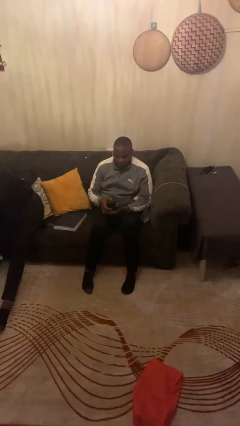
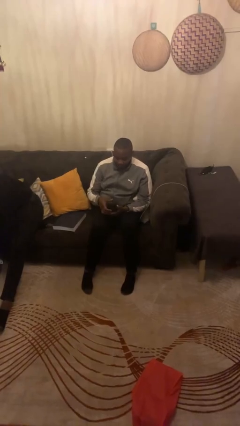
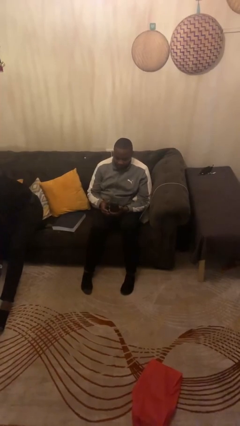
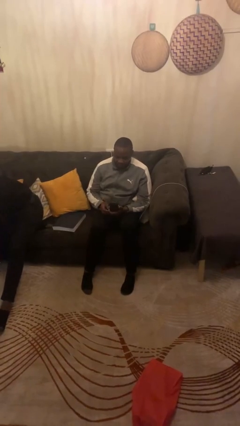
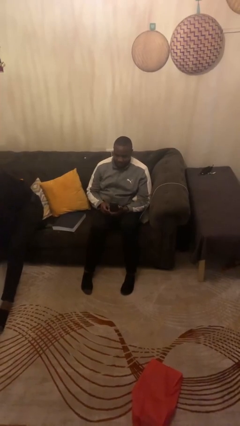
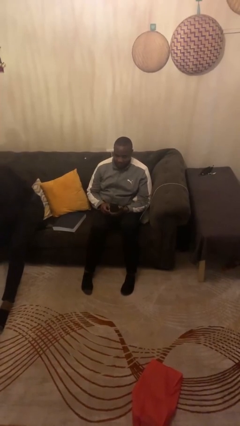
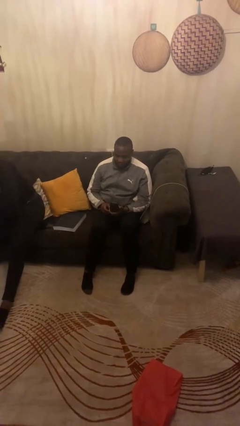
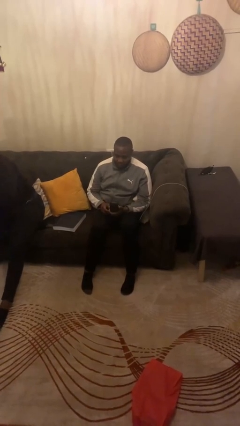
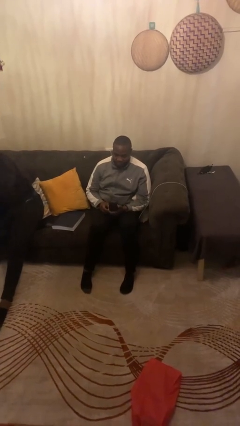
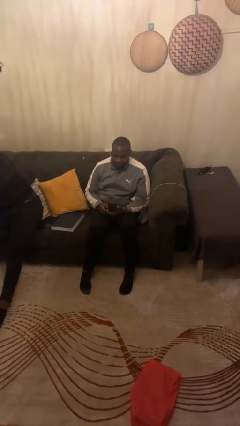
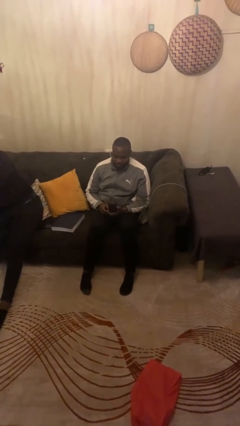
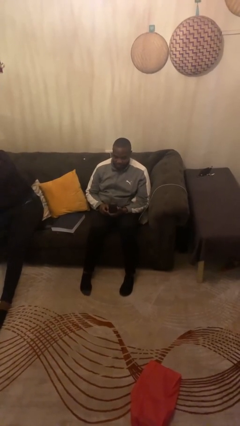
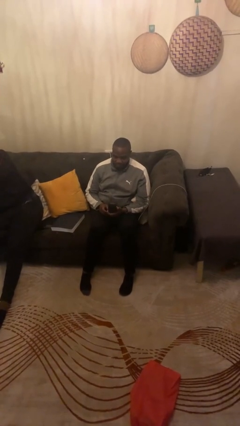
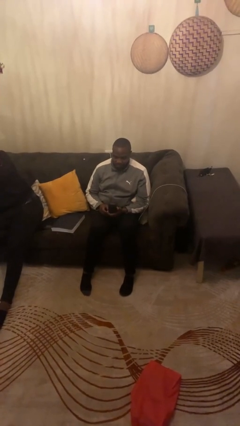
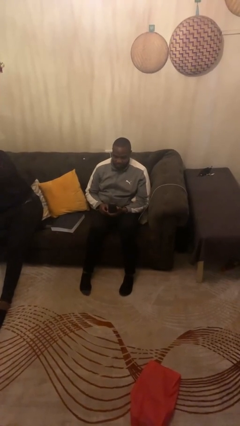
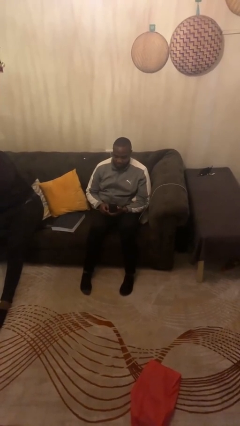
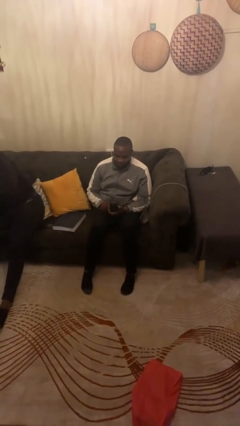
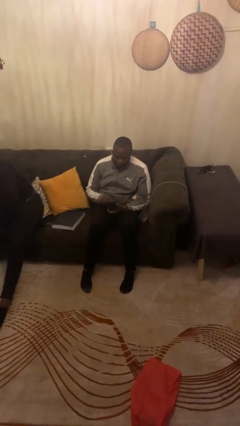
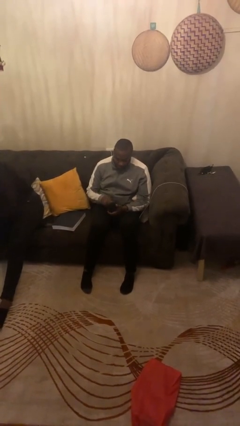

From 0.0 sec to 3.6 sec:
person opens jewelry box

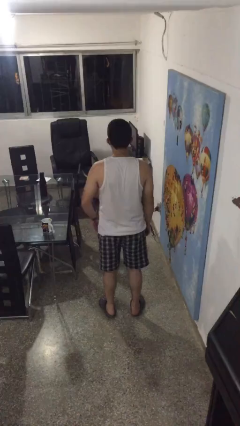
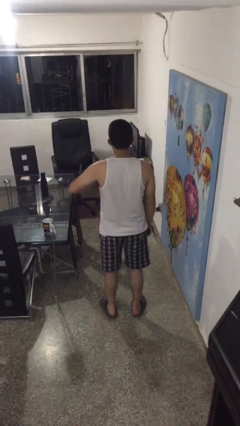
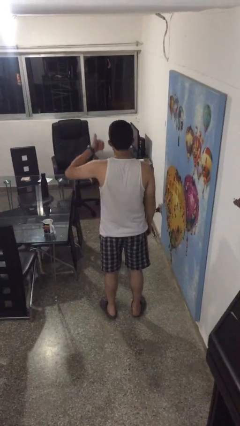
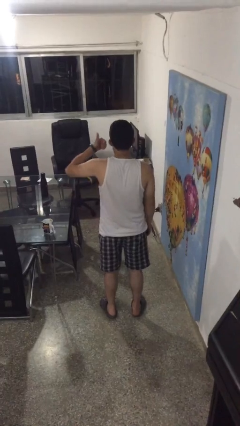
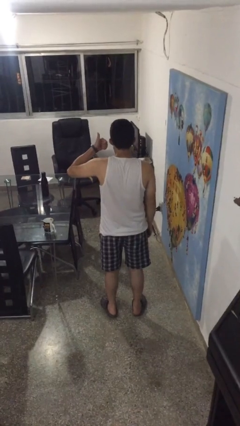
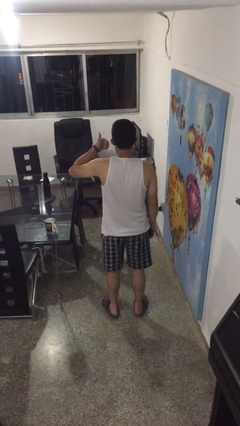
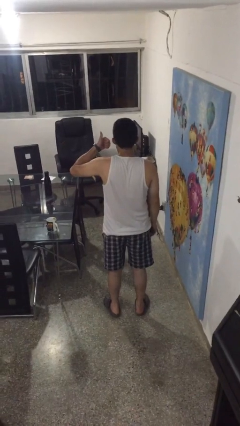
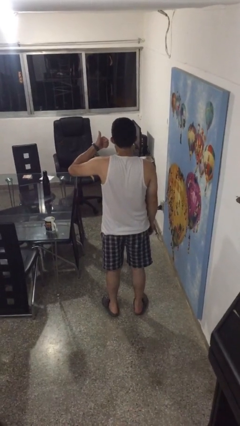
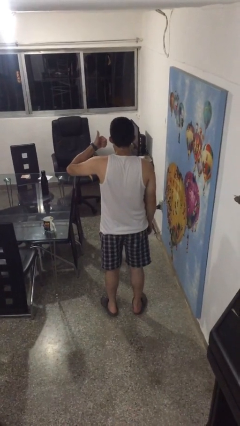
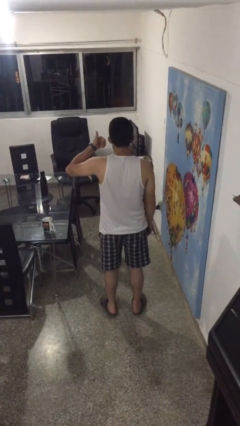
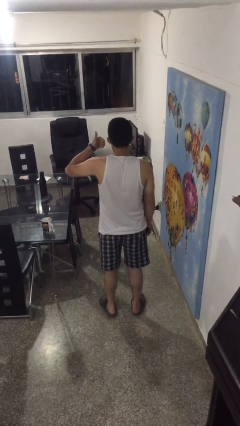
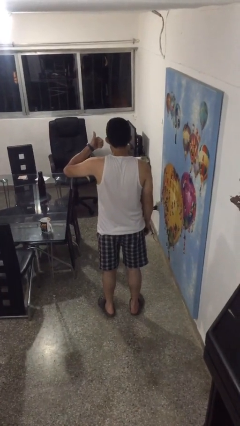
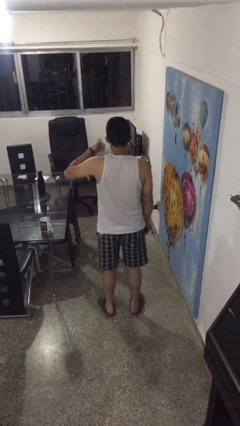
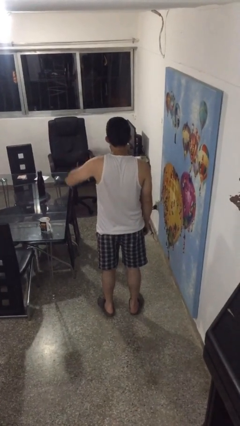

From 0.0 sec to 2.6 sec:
person gestures thumbs up

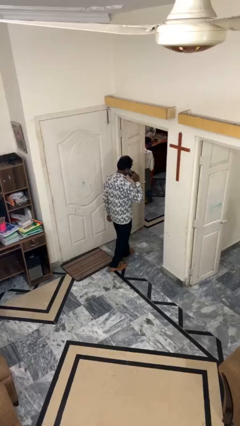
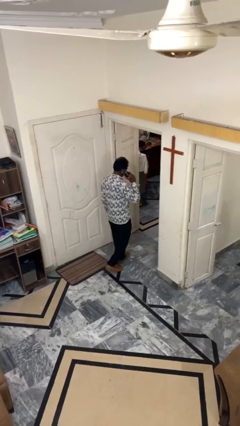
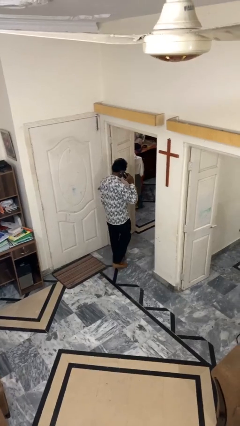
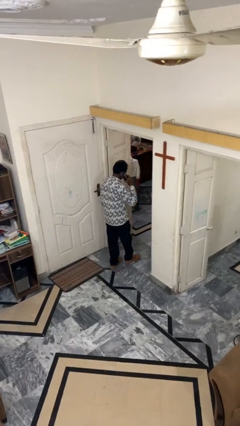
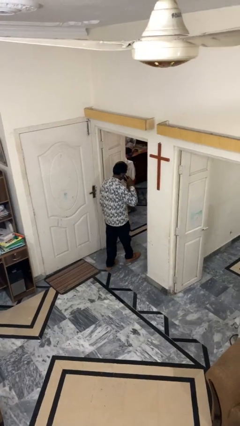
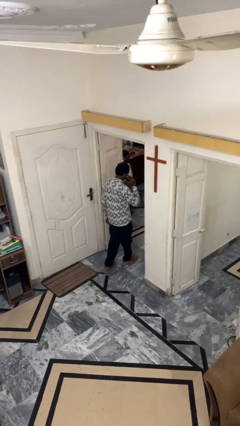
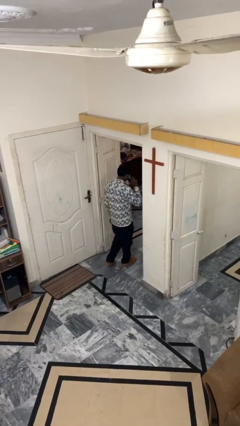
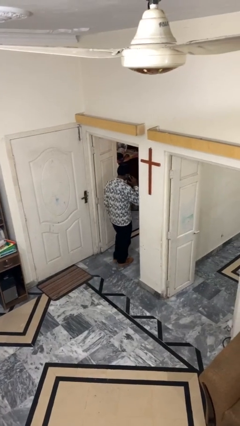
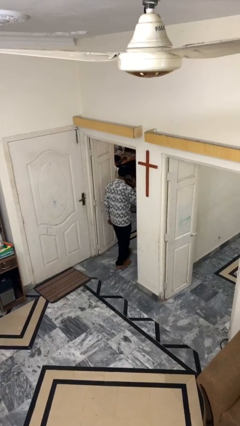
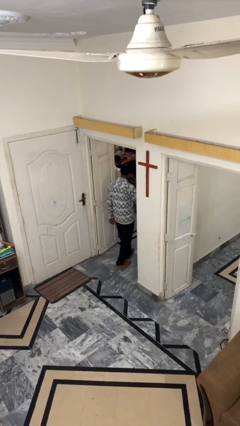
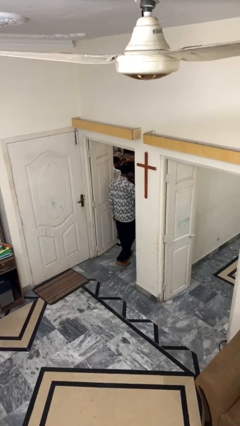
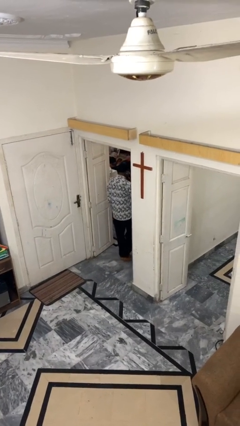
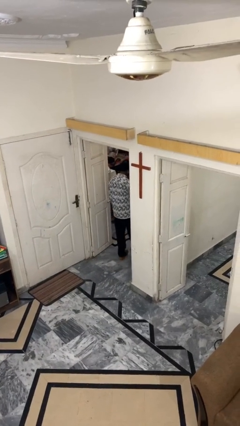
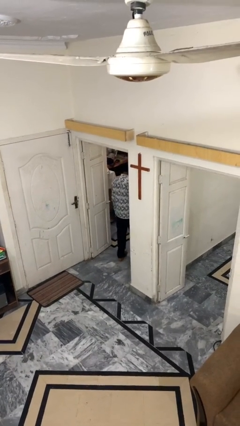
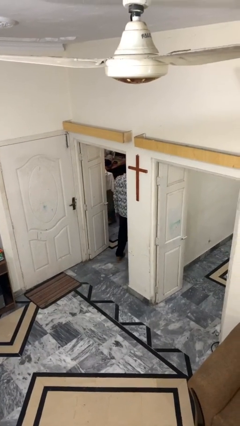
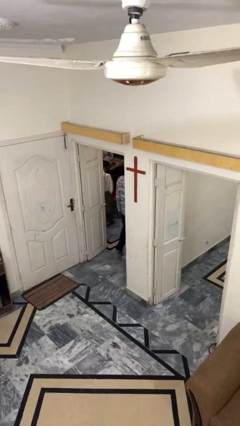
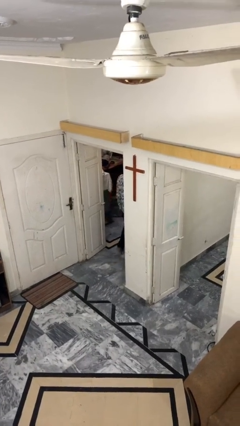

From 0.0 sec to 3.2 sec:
person exits scene through structure

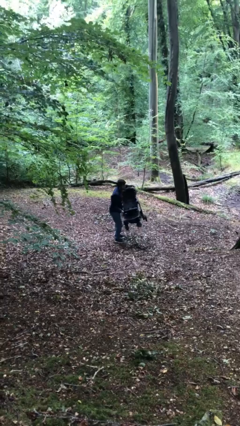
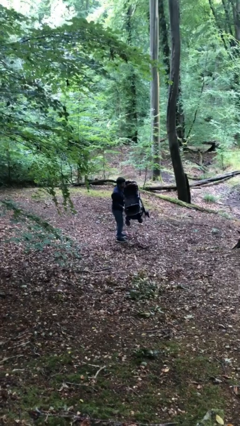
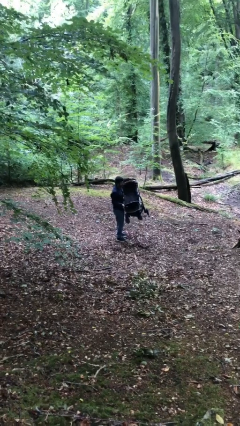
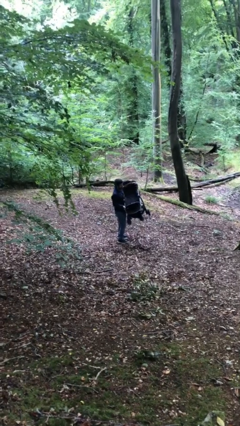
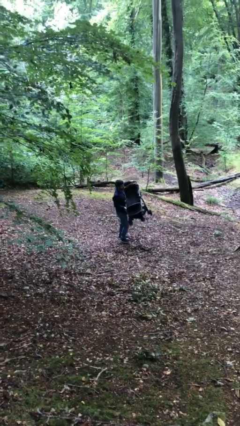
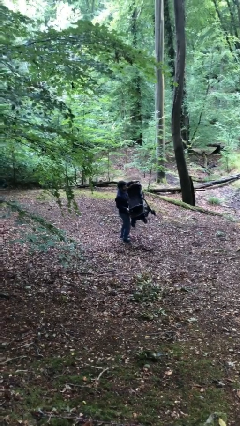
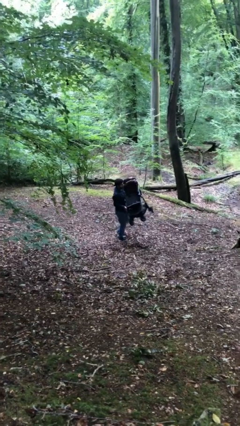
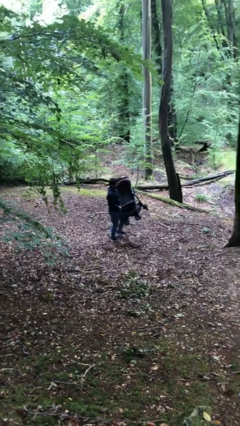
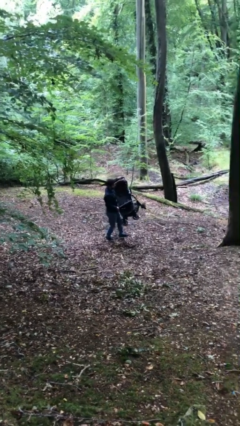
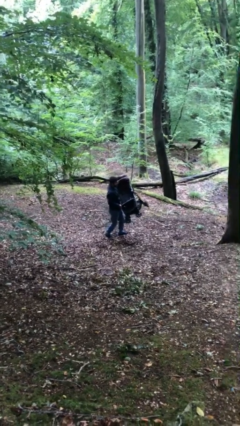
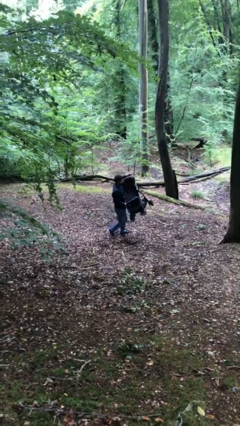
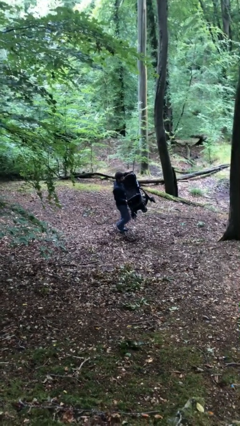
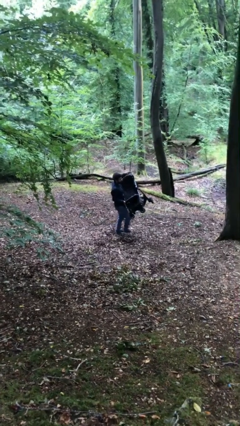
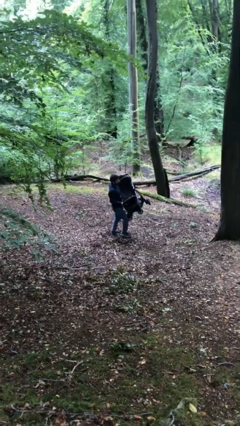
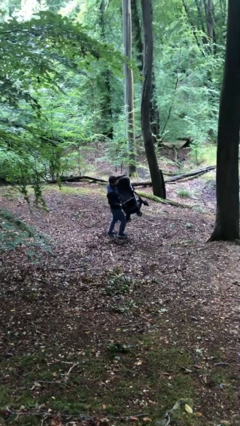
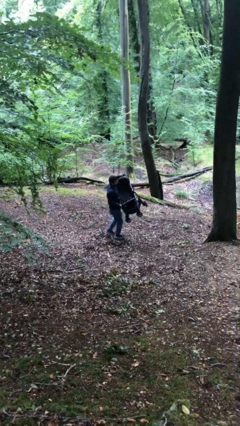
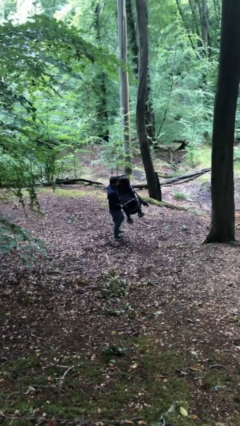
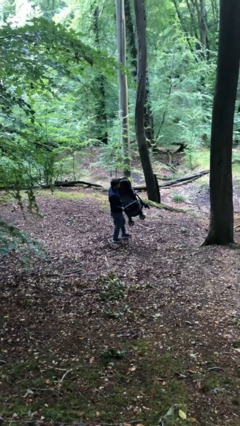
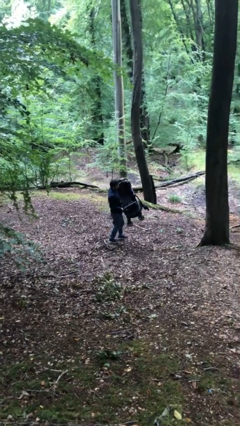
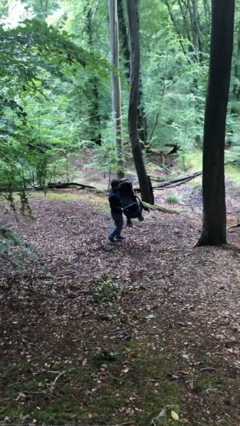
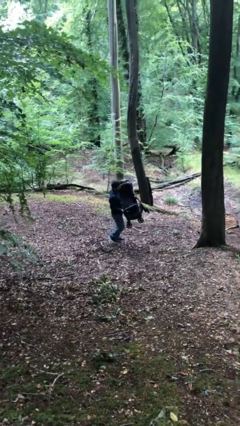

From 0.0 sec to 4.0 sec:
person carries heavy object

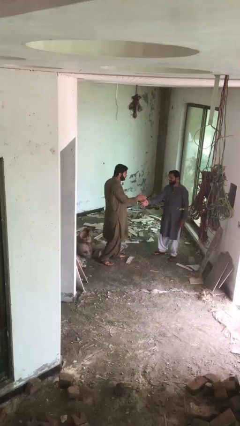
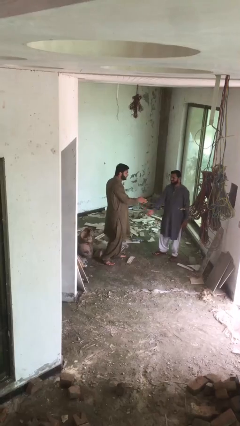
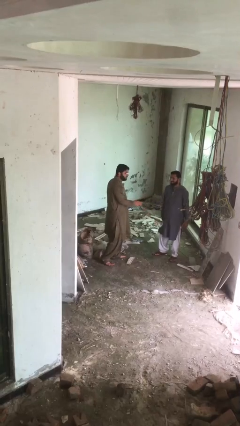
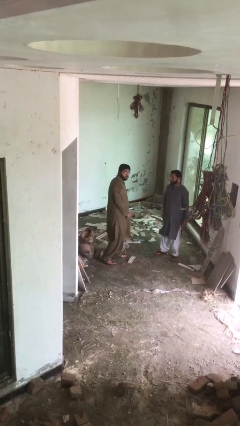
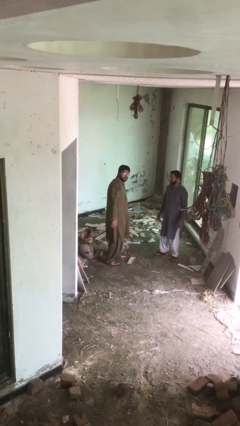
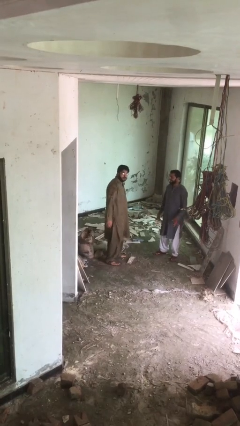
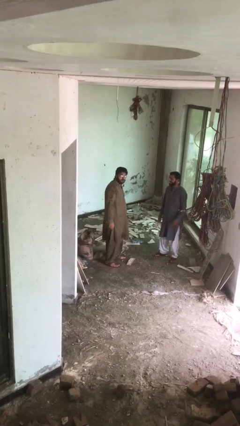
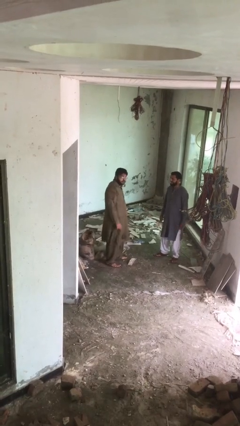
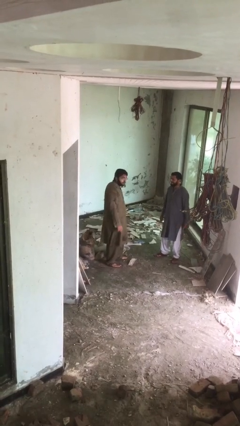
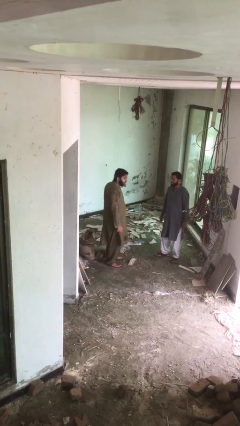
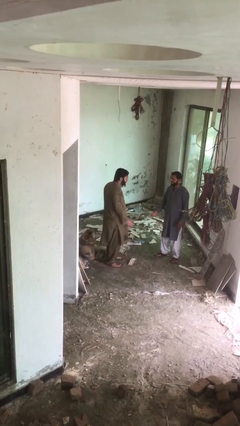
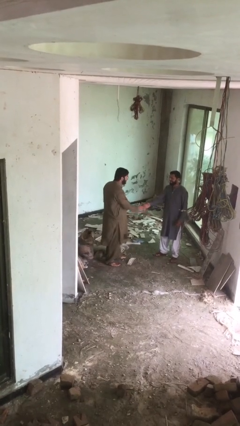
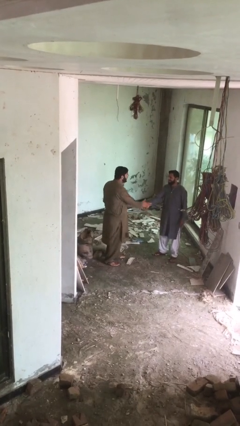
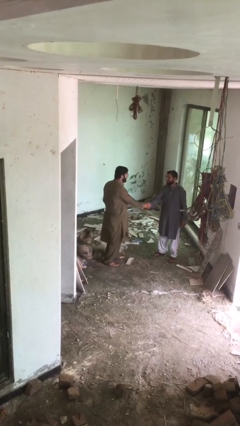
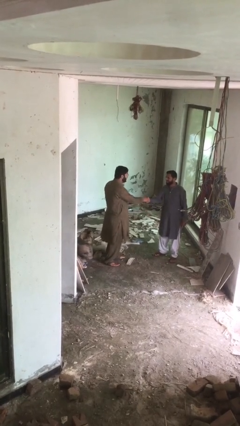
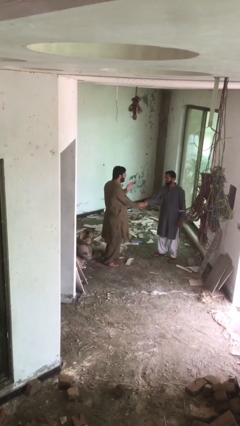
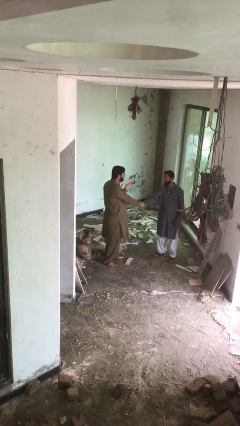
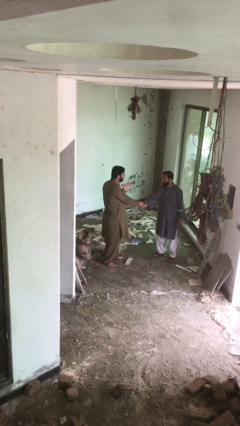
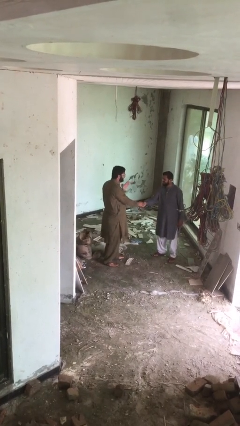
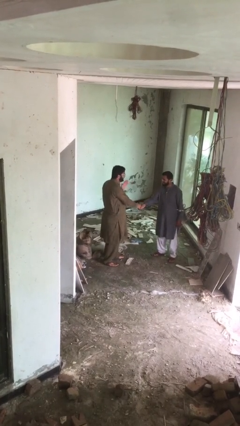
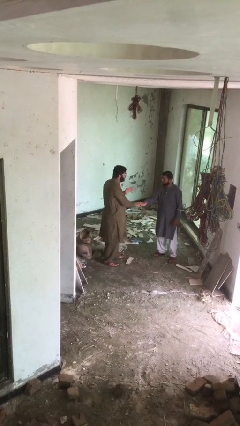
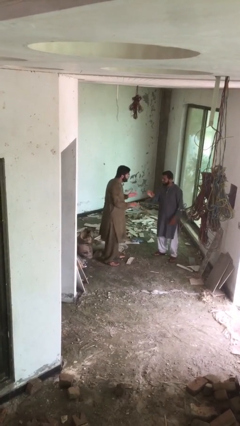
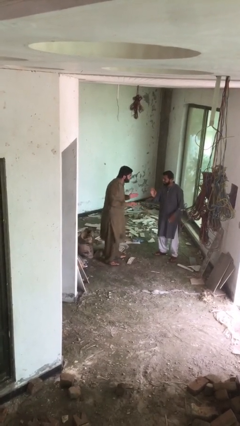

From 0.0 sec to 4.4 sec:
person shakes hand

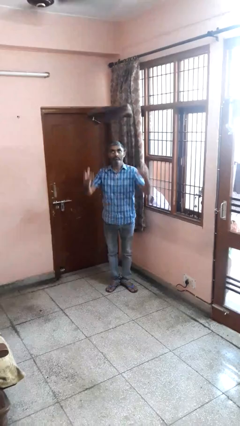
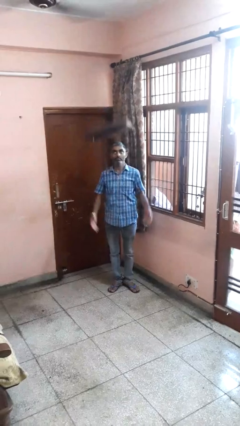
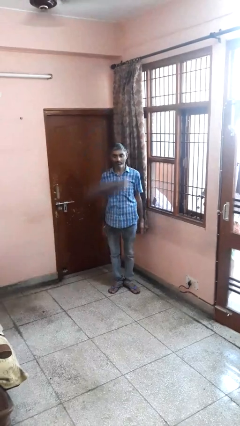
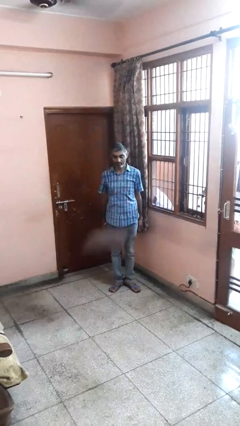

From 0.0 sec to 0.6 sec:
person throws object into air
